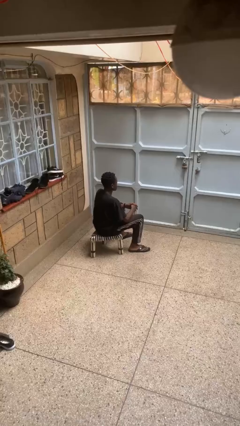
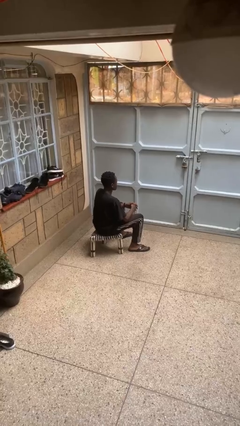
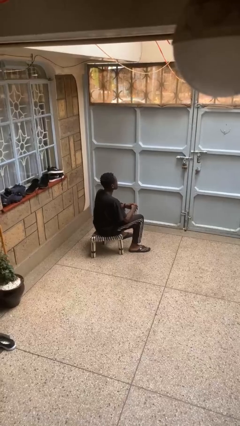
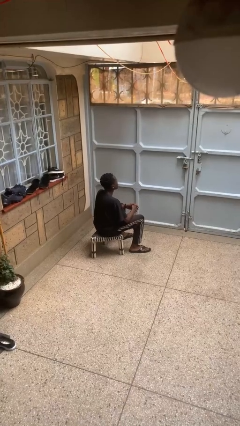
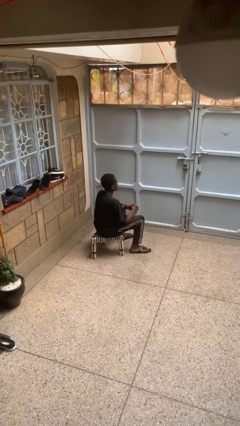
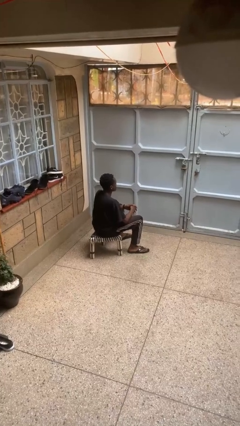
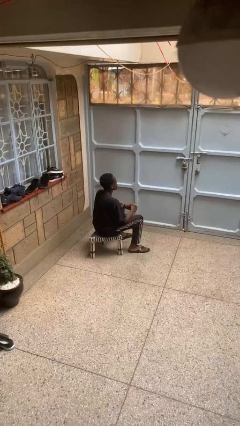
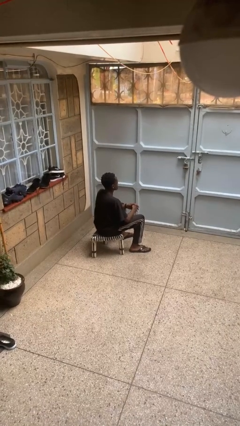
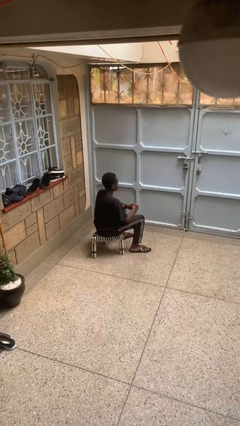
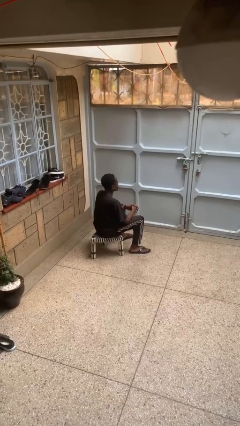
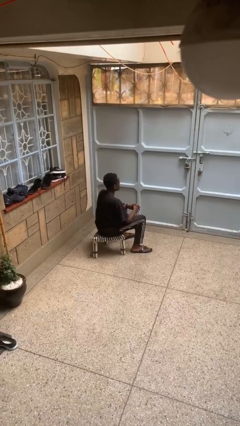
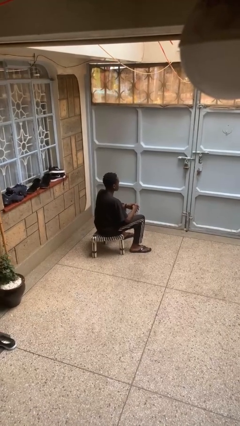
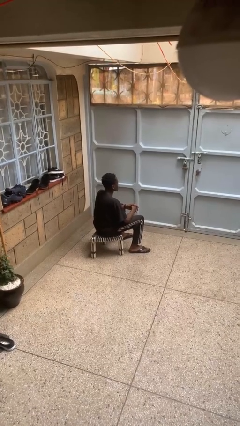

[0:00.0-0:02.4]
person nods head

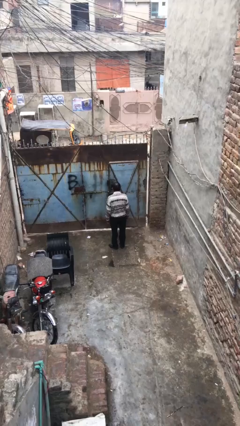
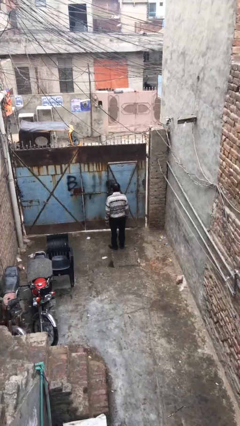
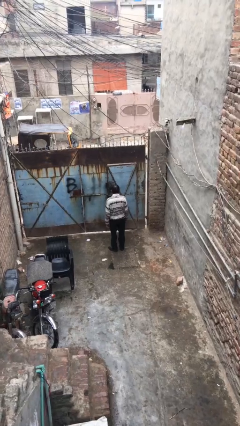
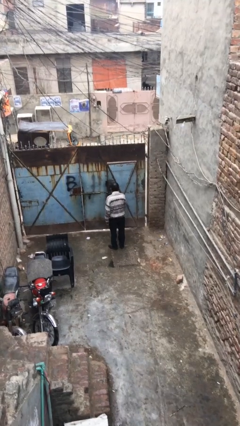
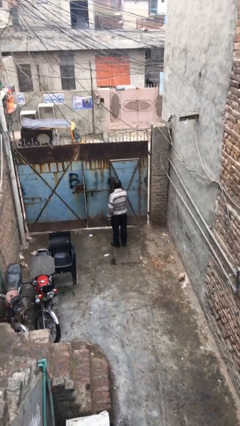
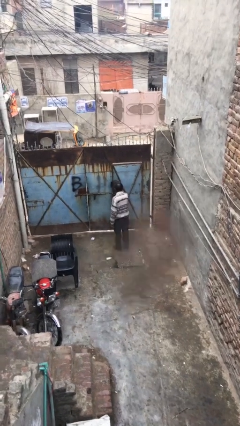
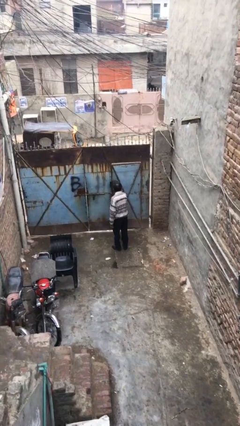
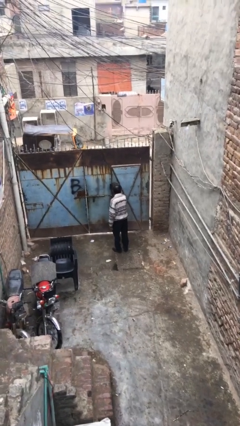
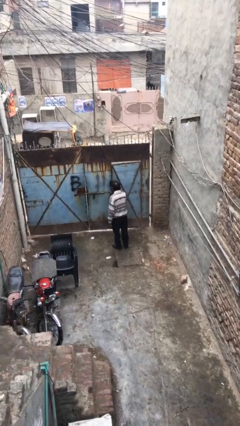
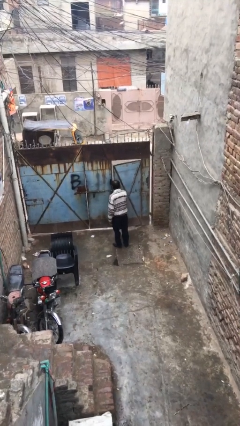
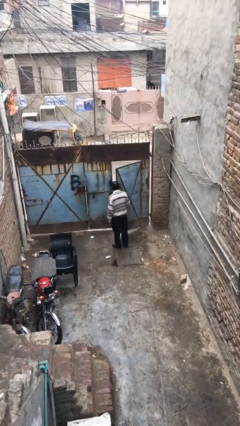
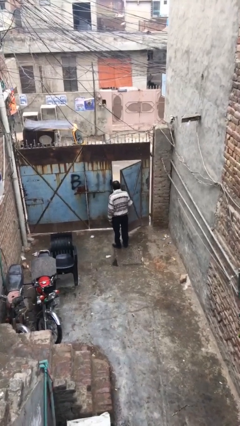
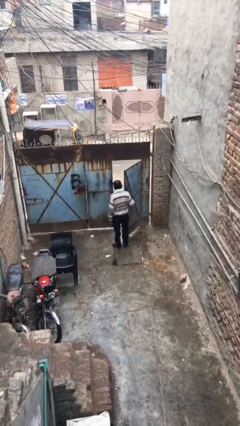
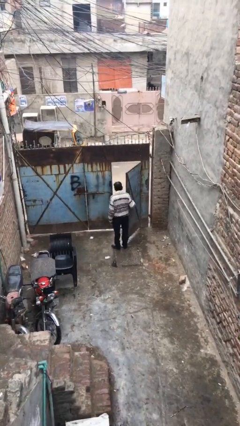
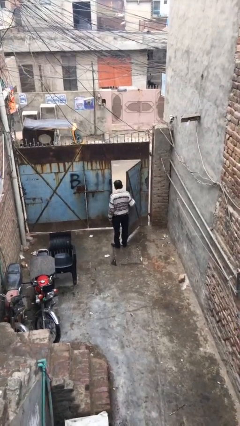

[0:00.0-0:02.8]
person opens facility door

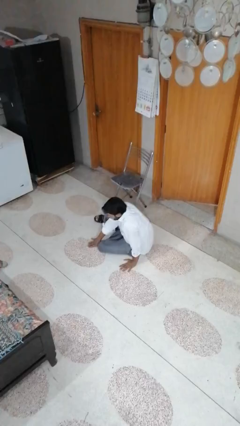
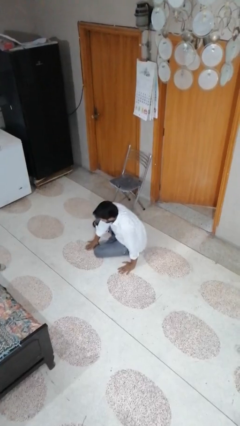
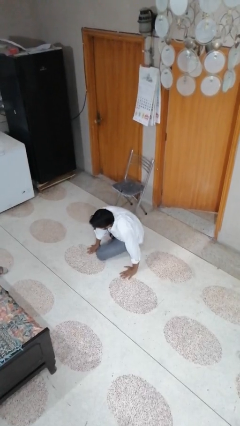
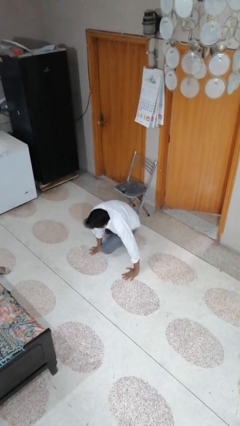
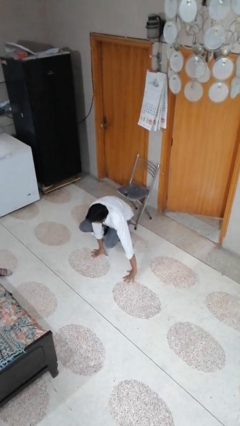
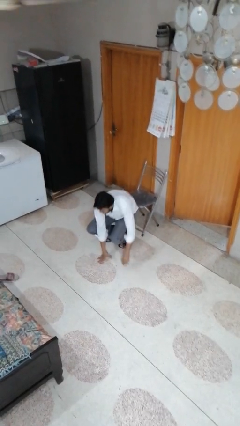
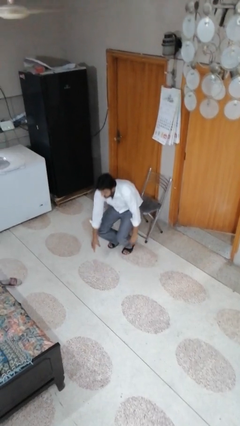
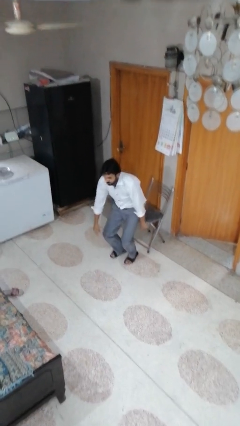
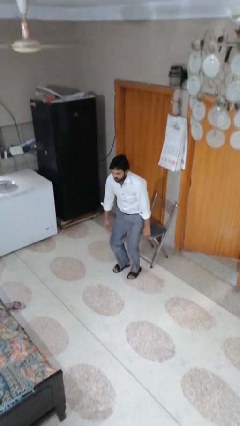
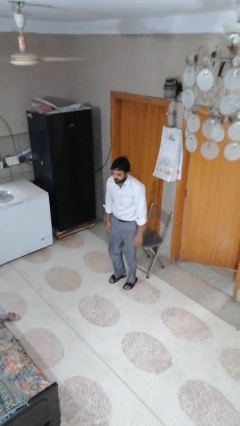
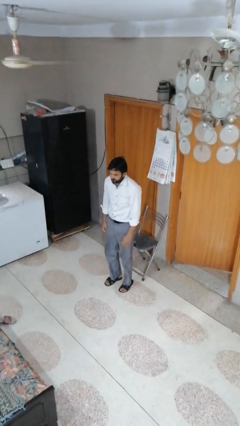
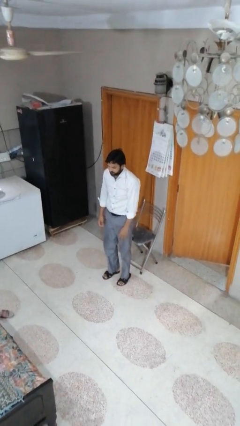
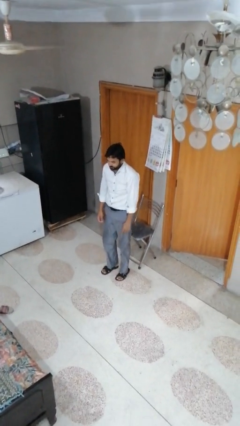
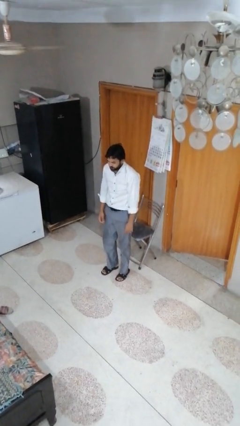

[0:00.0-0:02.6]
person stands up from floor

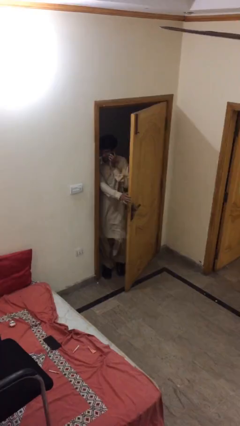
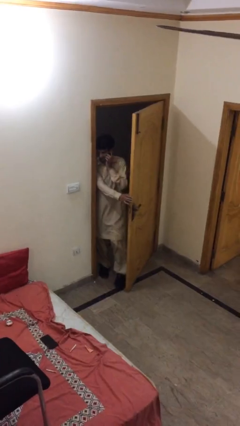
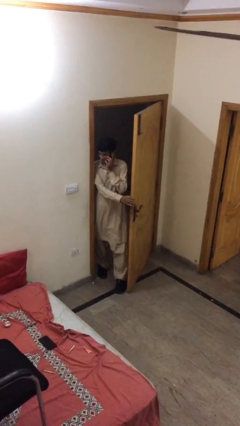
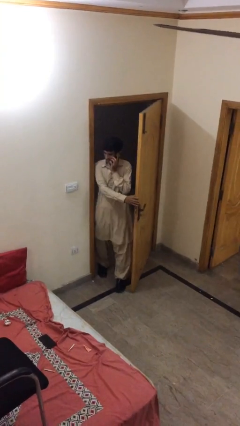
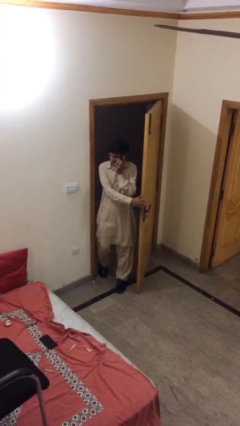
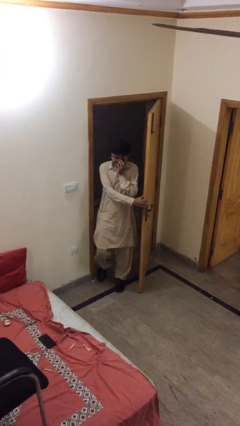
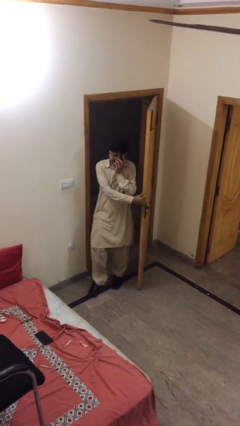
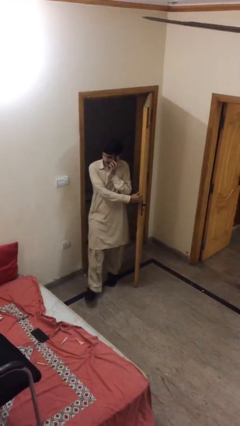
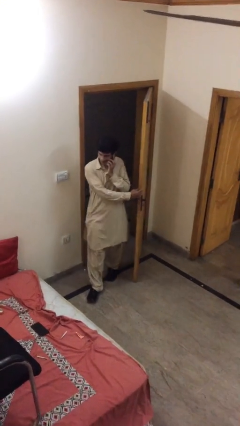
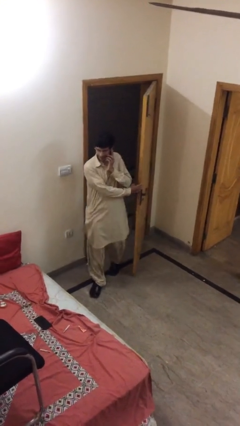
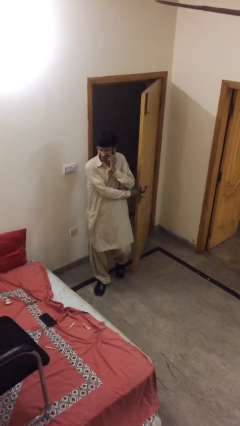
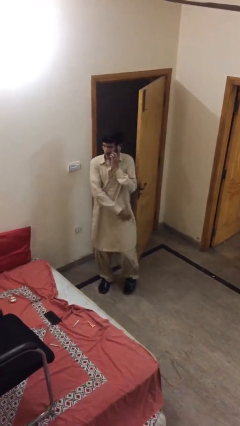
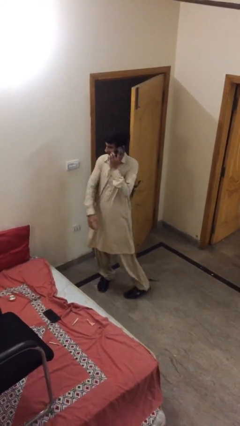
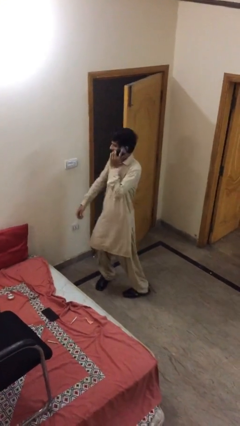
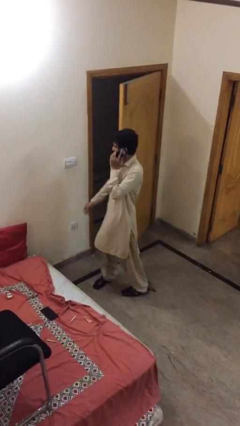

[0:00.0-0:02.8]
person enters scene through structure

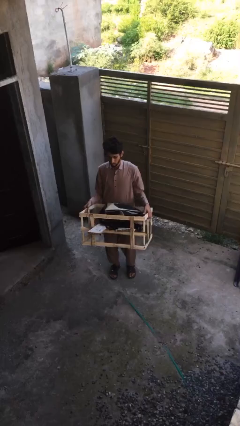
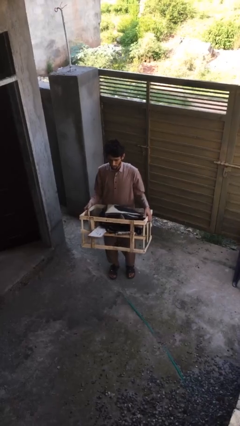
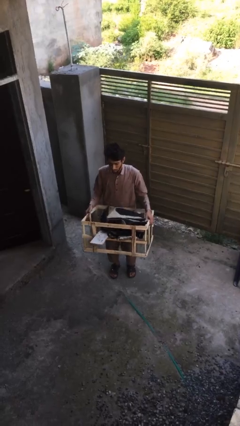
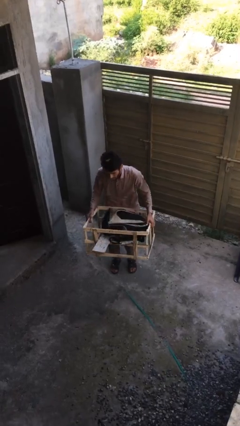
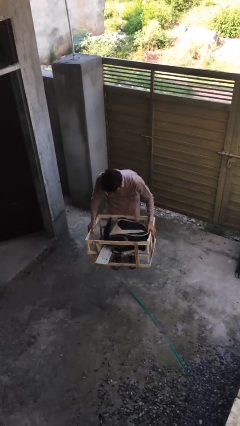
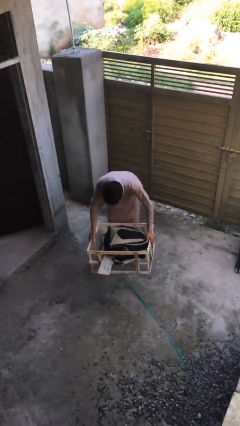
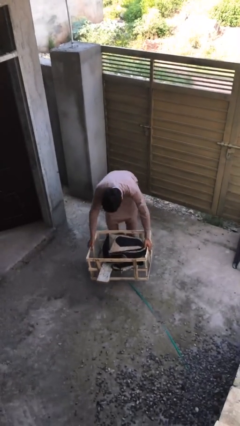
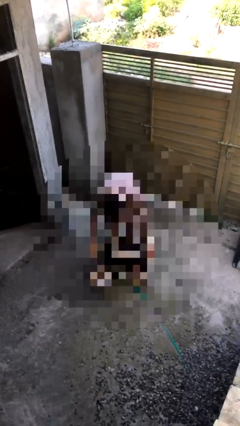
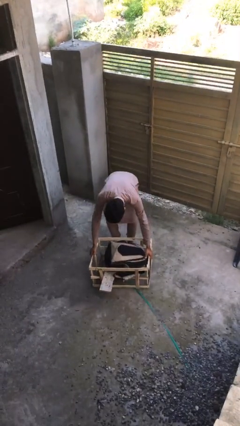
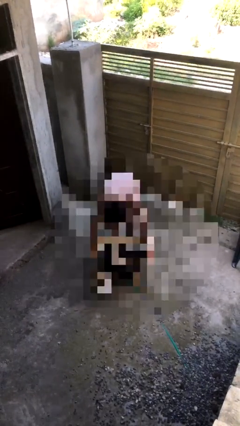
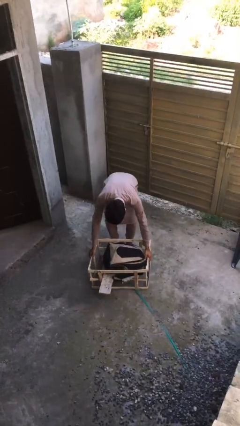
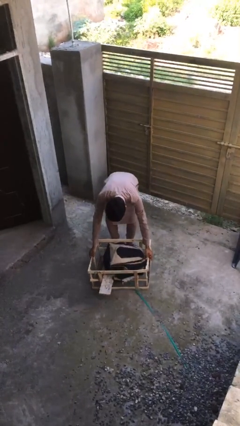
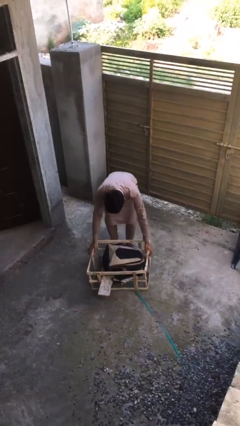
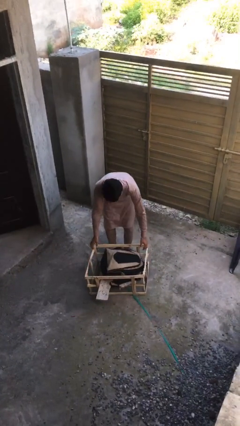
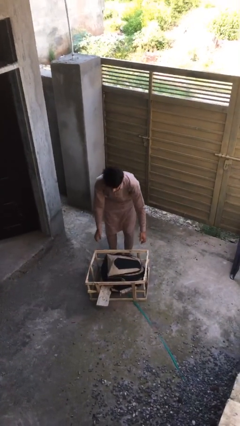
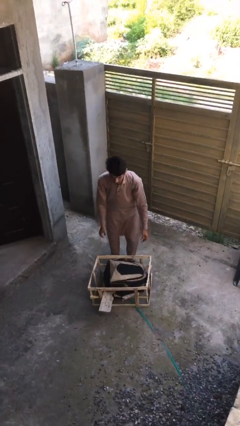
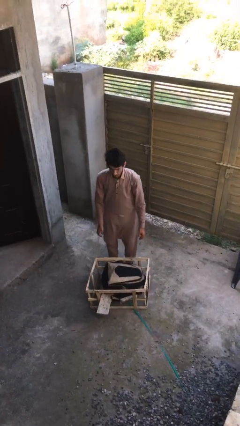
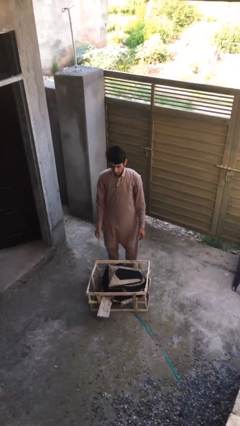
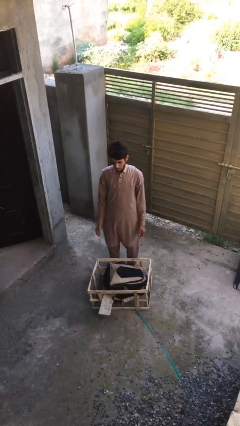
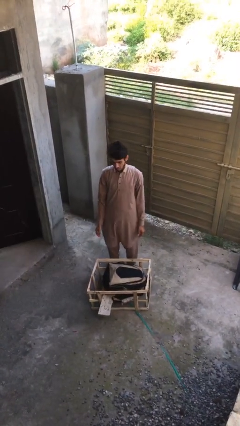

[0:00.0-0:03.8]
person puts down object on floor

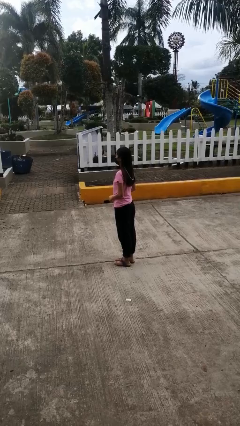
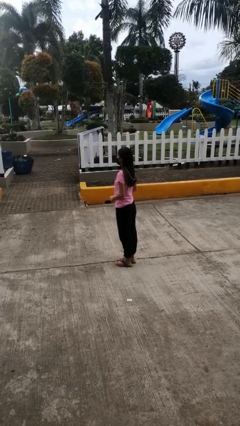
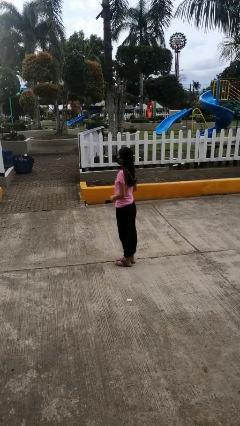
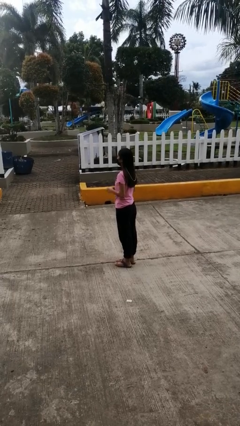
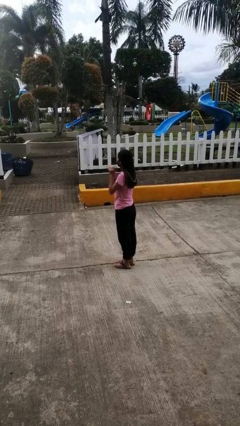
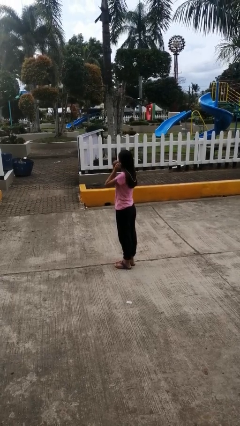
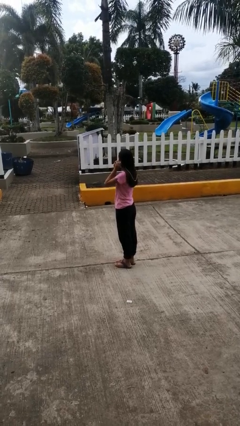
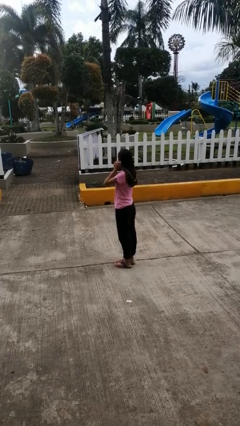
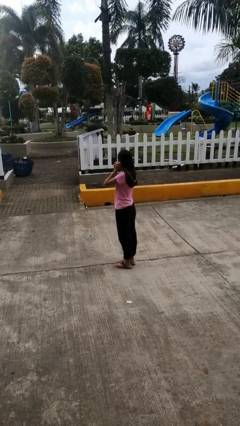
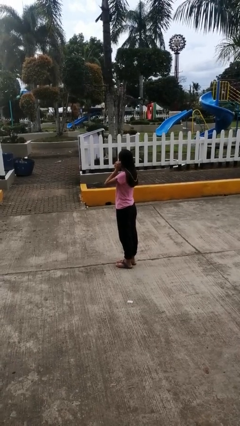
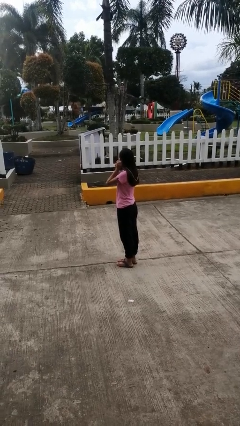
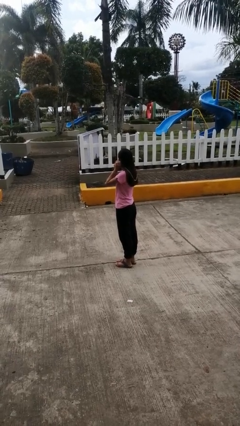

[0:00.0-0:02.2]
person puts on earrings

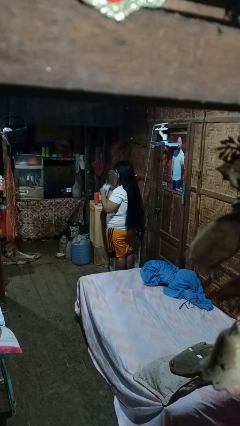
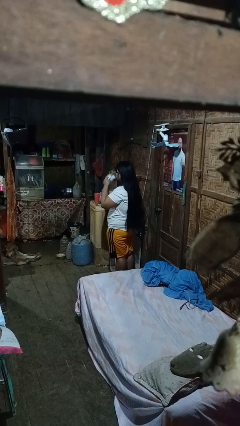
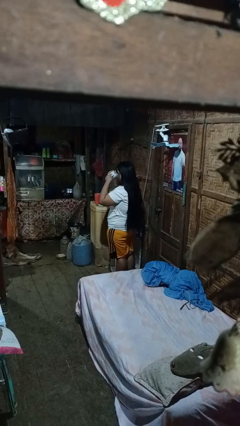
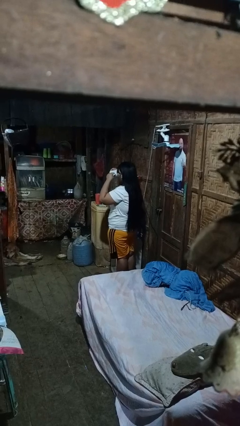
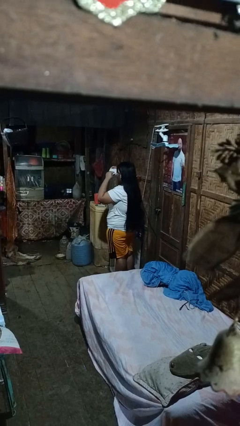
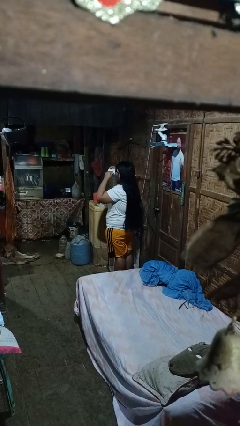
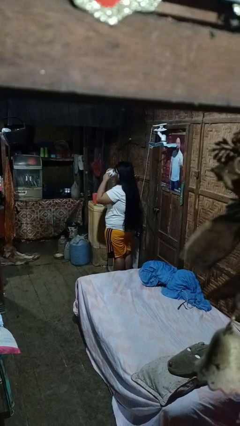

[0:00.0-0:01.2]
person drinks from mug
